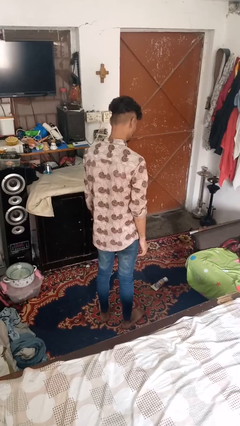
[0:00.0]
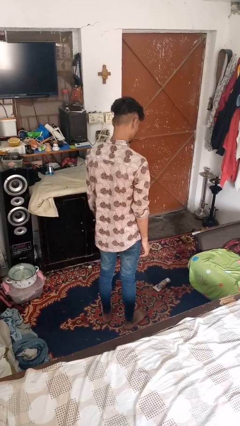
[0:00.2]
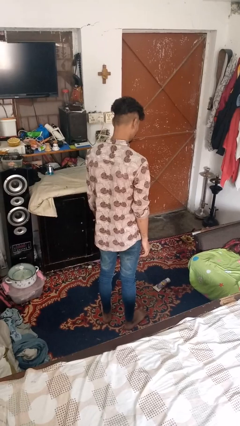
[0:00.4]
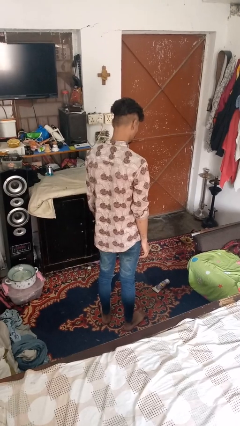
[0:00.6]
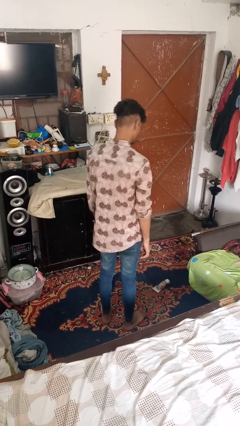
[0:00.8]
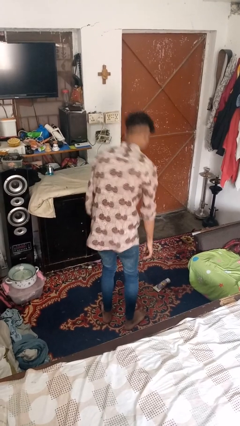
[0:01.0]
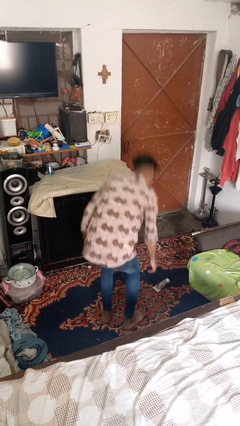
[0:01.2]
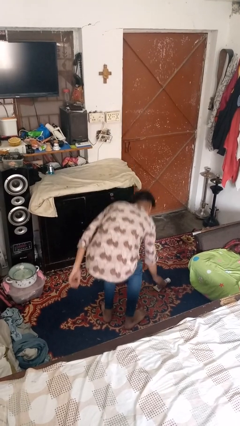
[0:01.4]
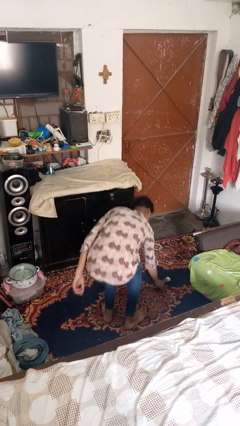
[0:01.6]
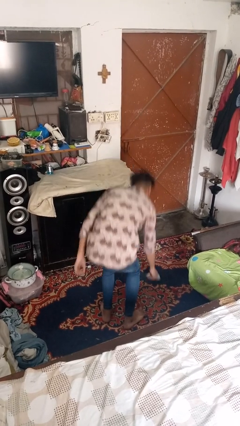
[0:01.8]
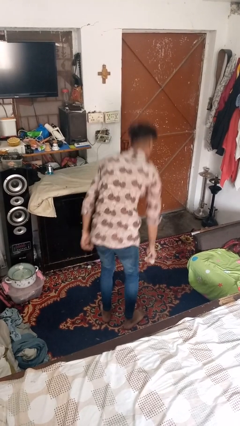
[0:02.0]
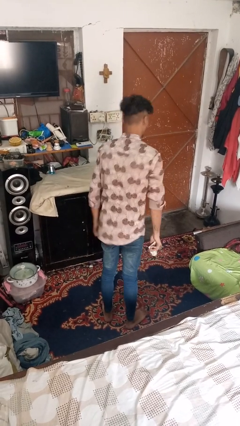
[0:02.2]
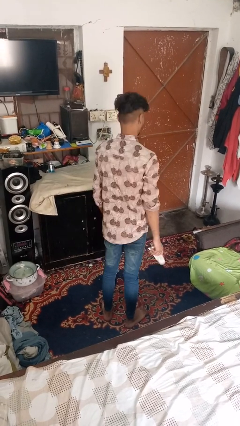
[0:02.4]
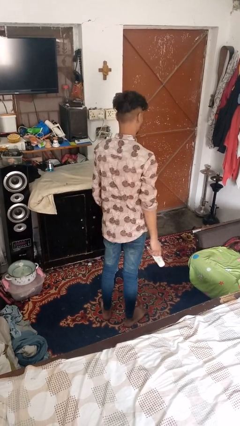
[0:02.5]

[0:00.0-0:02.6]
person picks up object from floor

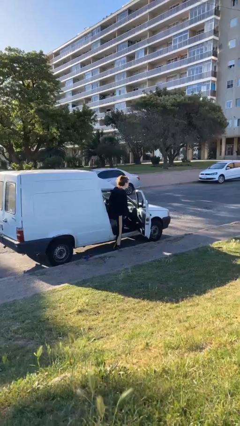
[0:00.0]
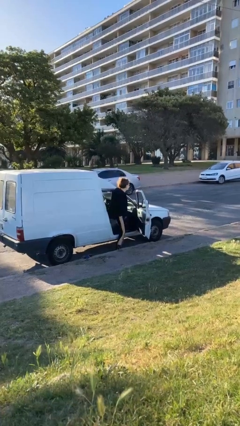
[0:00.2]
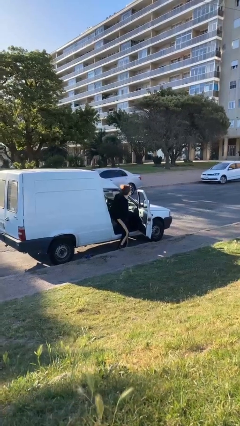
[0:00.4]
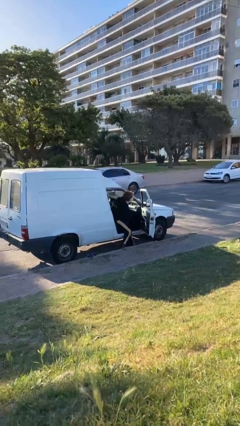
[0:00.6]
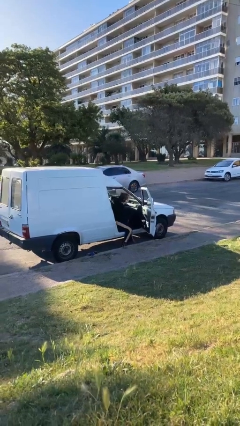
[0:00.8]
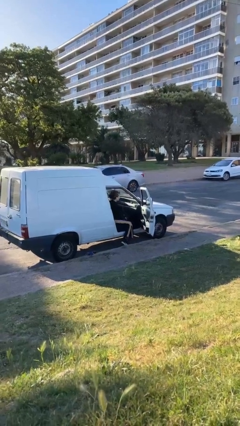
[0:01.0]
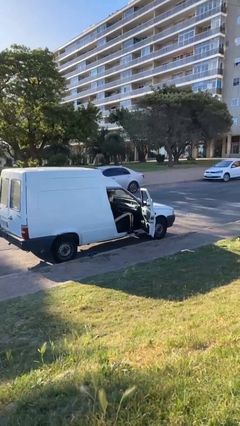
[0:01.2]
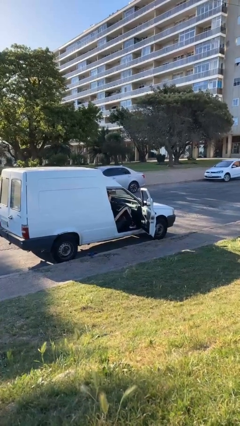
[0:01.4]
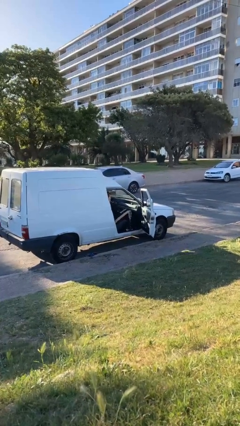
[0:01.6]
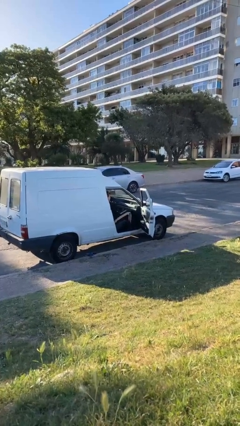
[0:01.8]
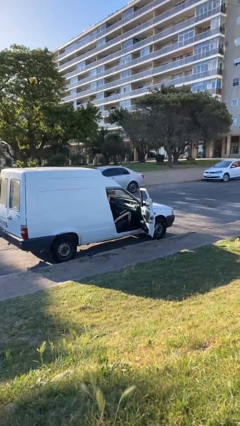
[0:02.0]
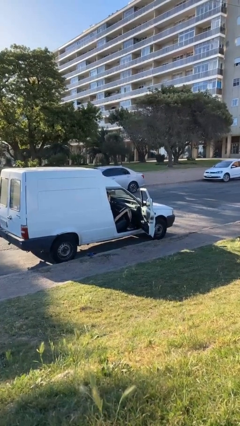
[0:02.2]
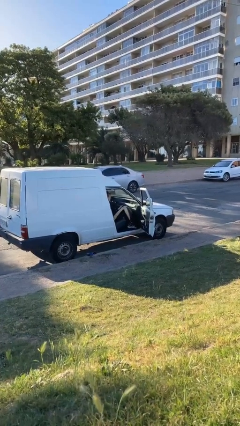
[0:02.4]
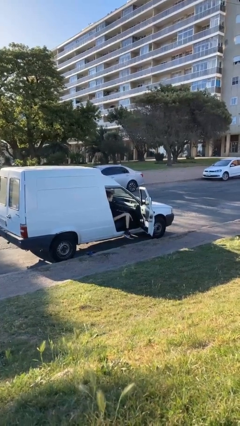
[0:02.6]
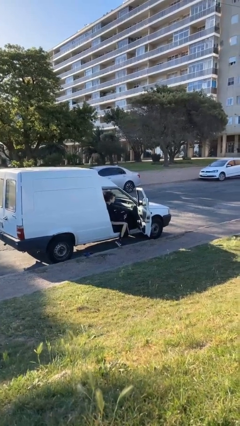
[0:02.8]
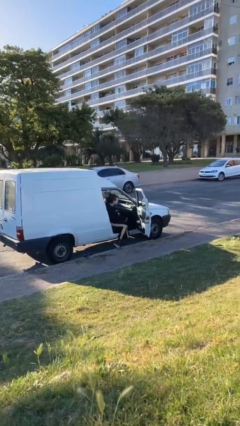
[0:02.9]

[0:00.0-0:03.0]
person enters car

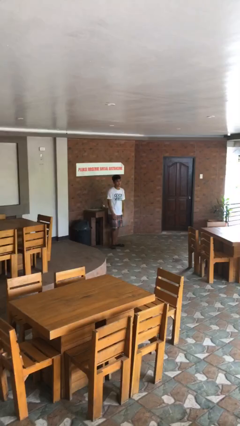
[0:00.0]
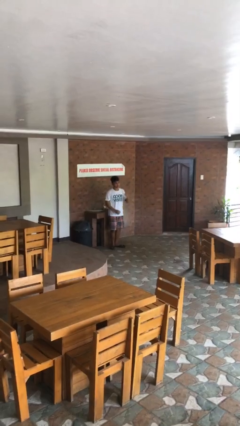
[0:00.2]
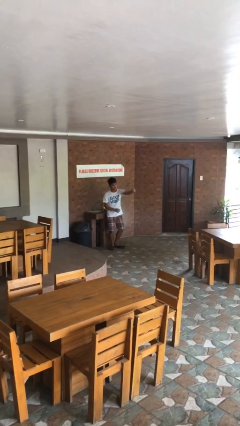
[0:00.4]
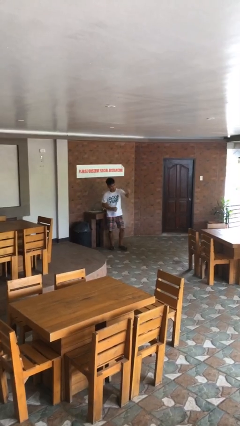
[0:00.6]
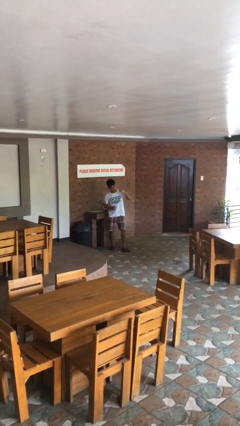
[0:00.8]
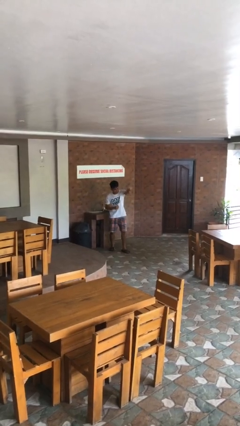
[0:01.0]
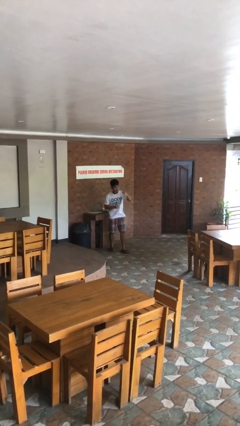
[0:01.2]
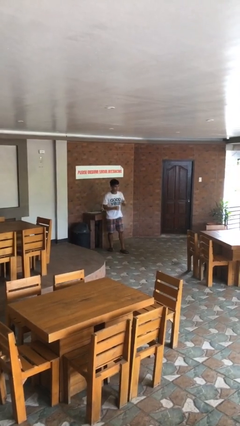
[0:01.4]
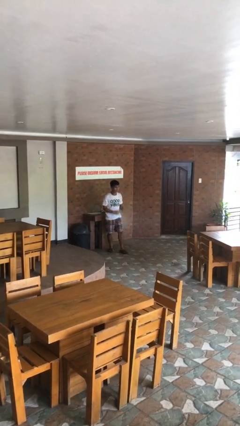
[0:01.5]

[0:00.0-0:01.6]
person punches

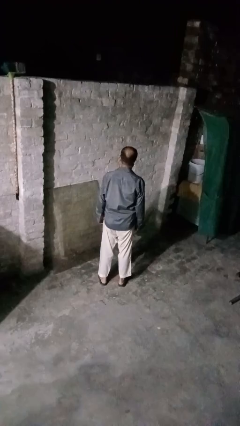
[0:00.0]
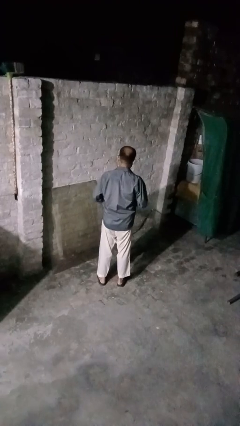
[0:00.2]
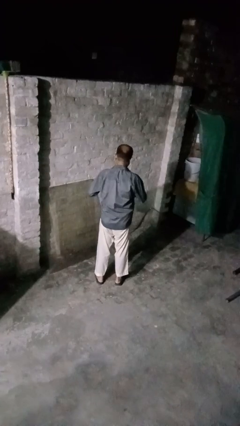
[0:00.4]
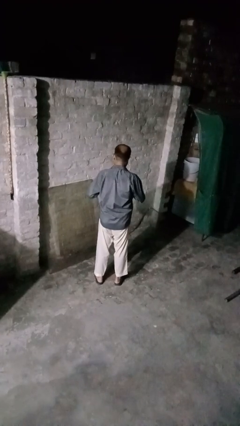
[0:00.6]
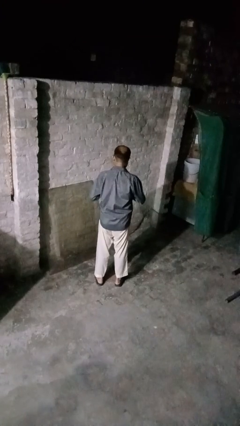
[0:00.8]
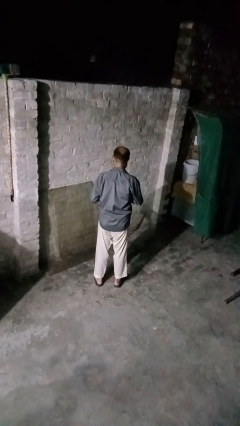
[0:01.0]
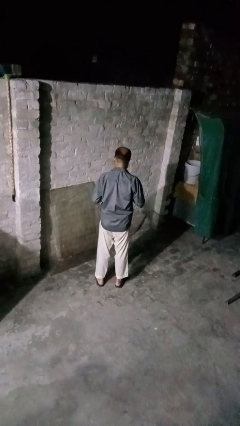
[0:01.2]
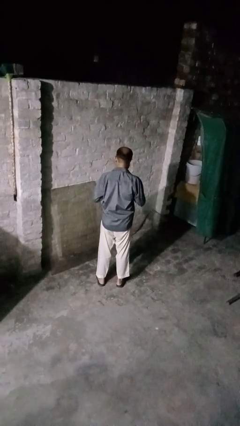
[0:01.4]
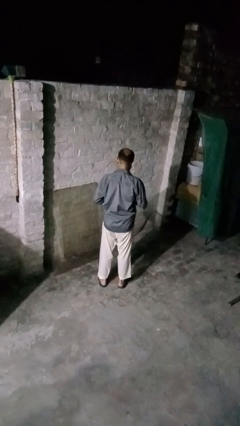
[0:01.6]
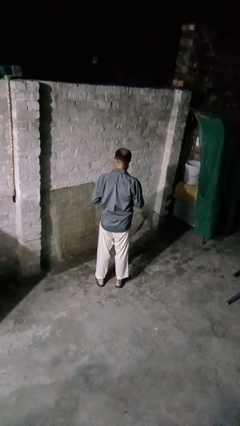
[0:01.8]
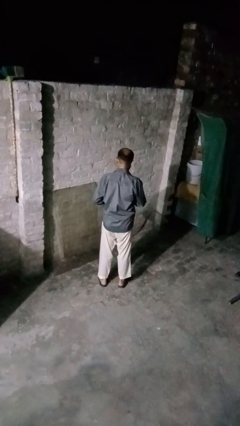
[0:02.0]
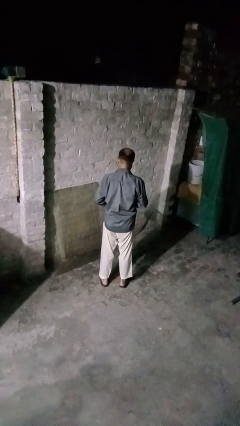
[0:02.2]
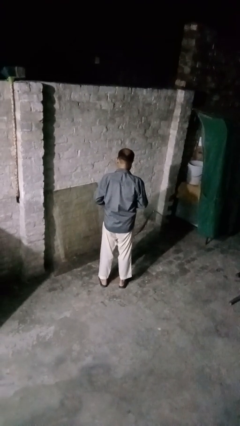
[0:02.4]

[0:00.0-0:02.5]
person unbuttons shirt

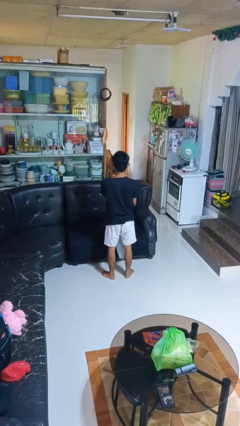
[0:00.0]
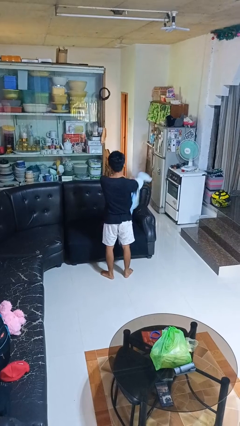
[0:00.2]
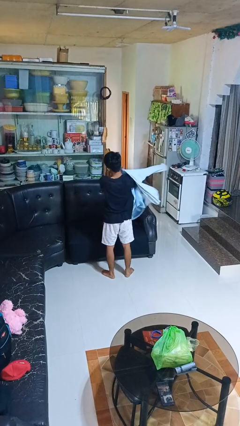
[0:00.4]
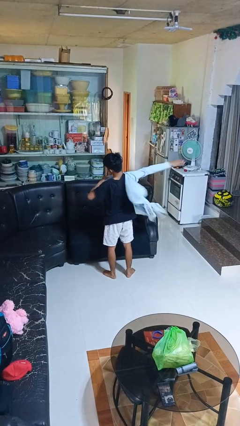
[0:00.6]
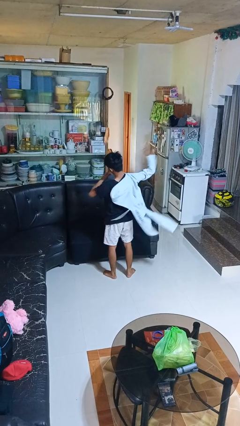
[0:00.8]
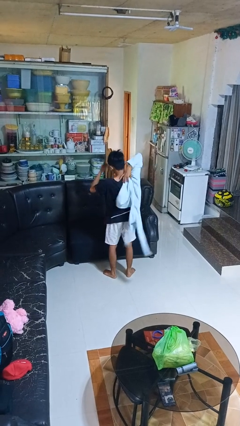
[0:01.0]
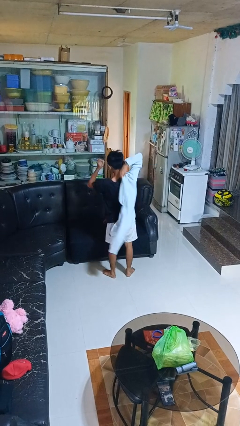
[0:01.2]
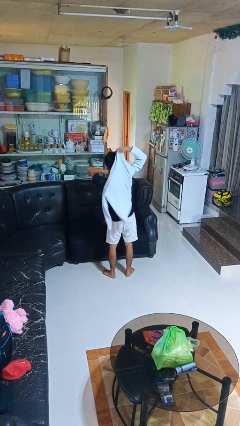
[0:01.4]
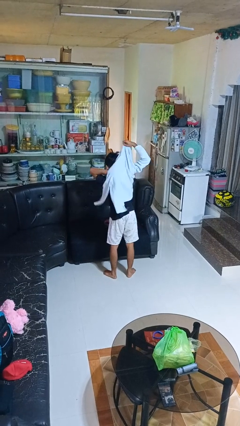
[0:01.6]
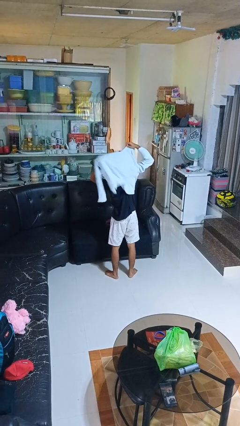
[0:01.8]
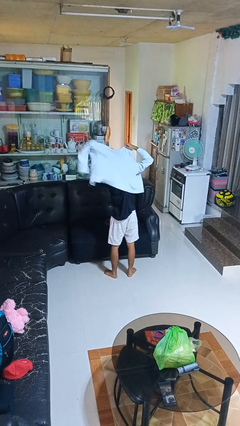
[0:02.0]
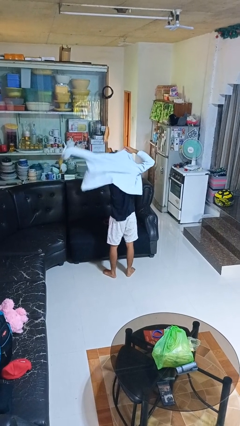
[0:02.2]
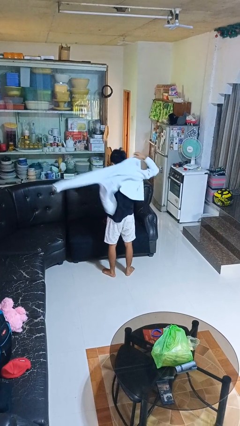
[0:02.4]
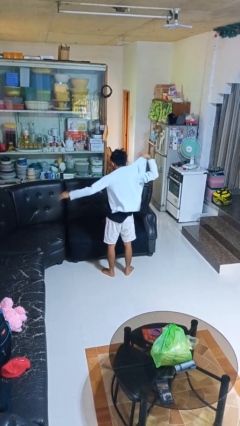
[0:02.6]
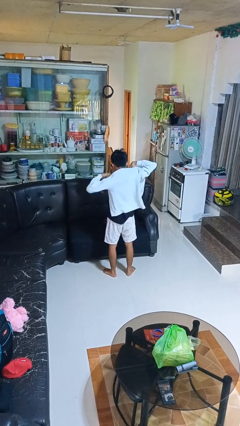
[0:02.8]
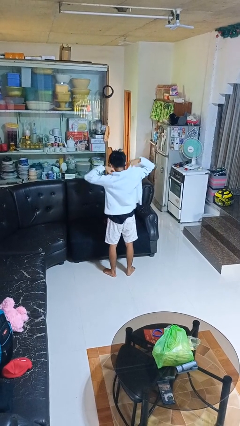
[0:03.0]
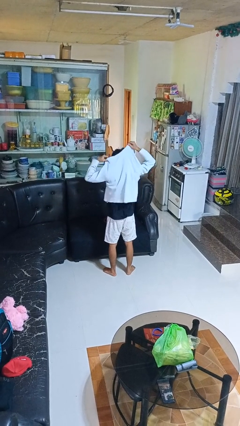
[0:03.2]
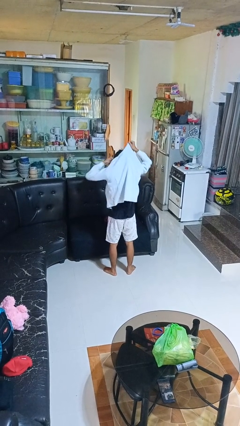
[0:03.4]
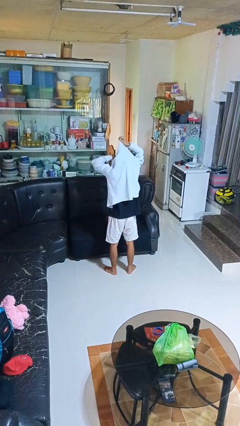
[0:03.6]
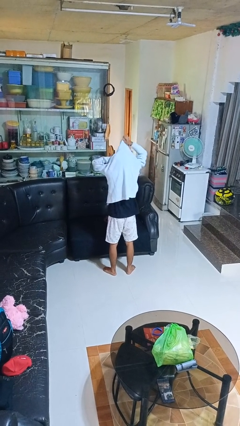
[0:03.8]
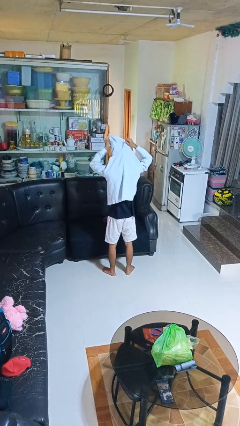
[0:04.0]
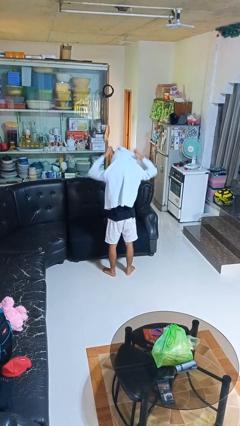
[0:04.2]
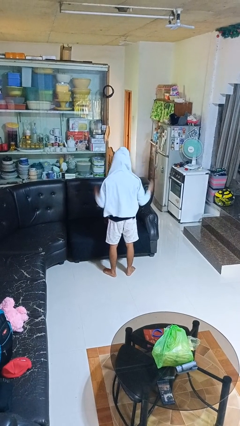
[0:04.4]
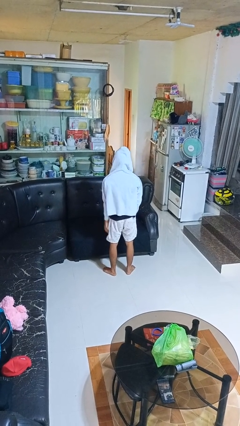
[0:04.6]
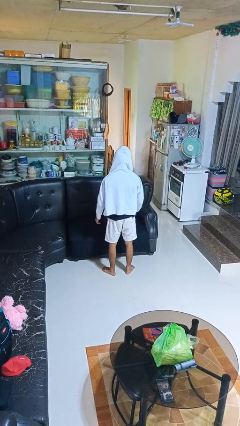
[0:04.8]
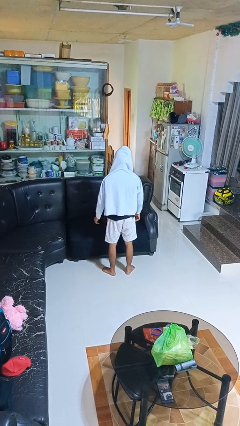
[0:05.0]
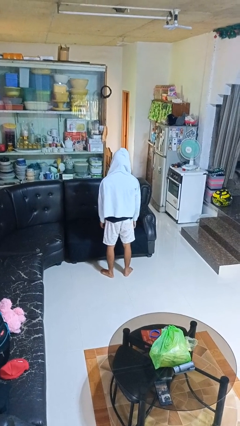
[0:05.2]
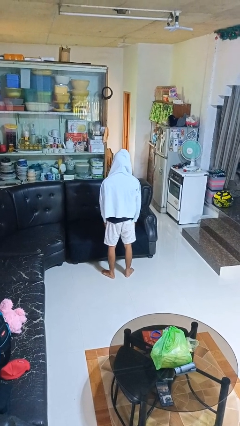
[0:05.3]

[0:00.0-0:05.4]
person puts on hoodie

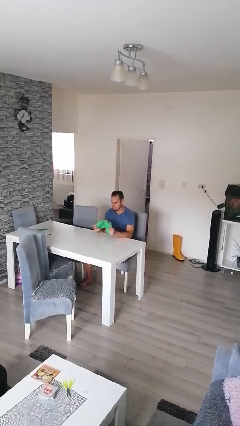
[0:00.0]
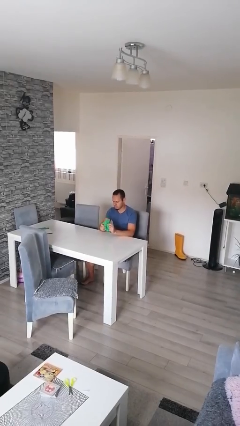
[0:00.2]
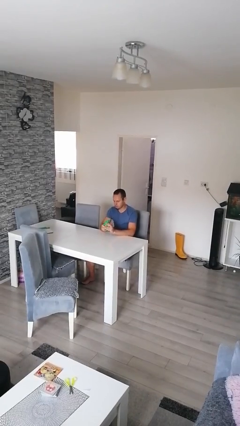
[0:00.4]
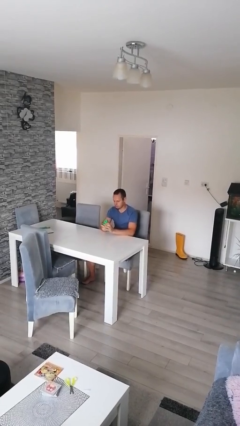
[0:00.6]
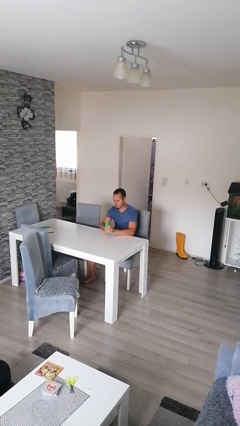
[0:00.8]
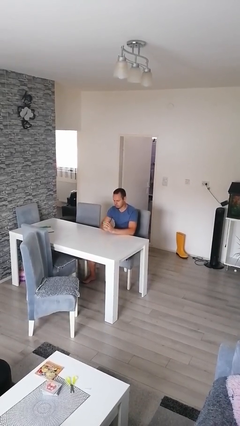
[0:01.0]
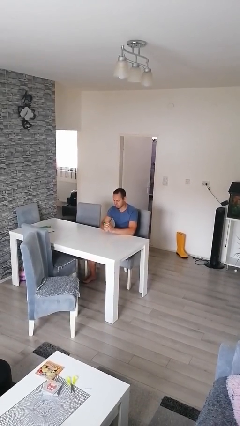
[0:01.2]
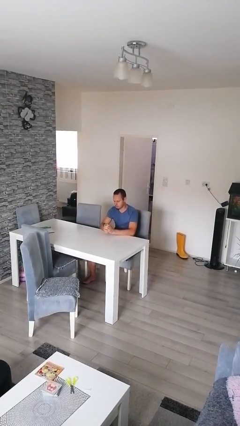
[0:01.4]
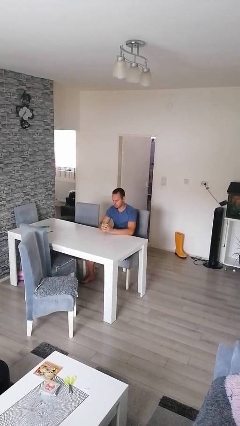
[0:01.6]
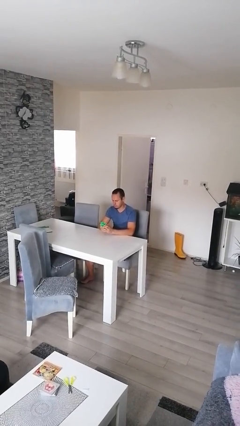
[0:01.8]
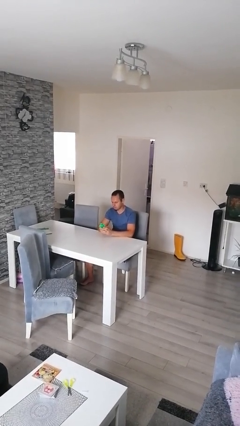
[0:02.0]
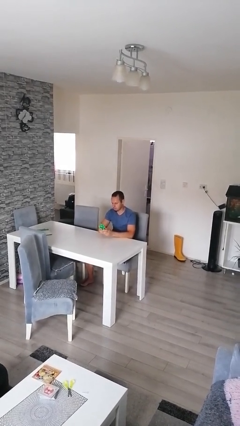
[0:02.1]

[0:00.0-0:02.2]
person crumples paper

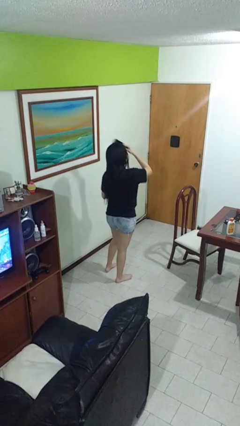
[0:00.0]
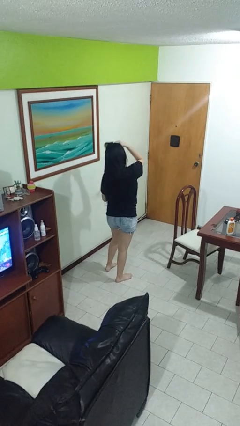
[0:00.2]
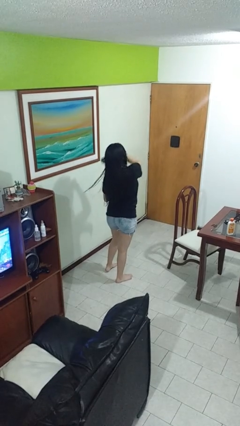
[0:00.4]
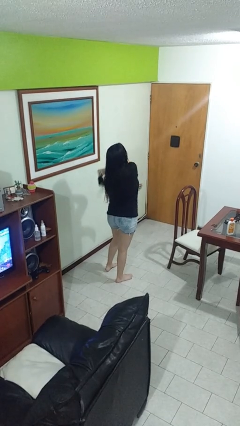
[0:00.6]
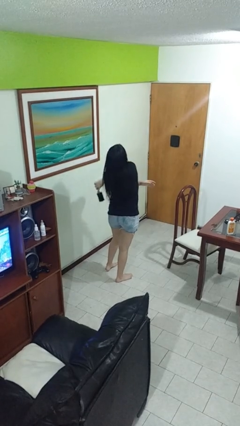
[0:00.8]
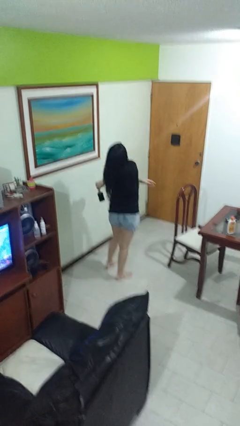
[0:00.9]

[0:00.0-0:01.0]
person brushes hair
